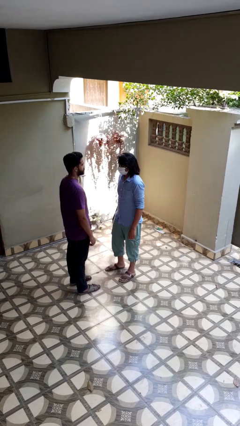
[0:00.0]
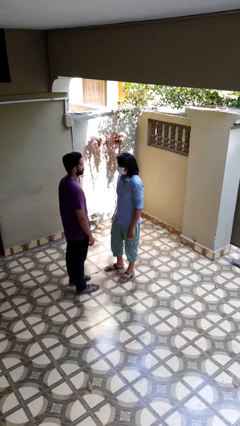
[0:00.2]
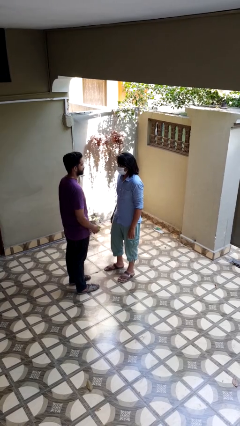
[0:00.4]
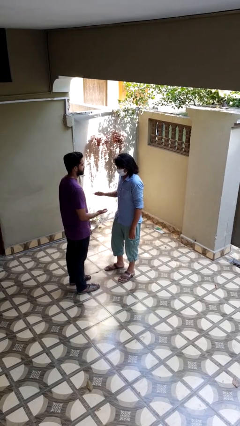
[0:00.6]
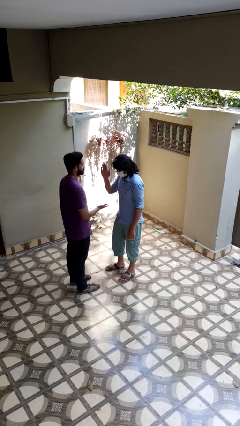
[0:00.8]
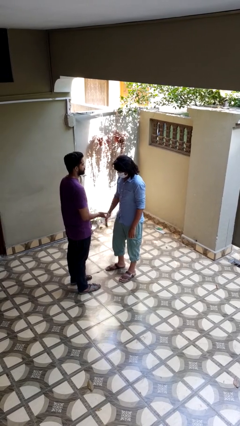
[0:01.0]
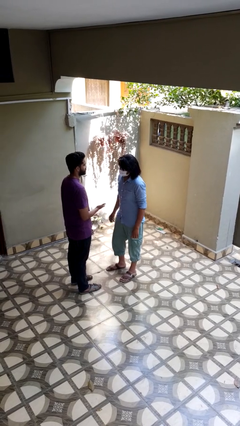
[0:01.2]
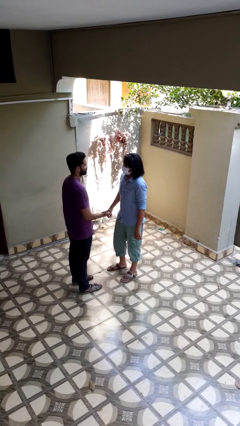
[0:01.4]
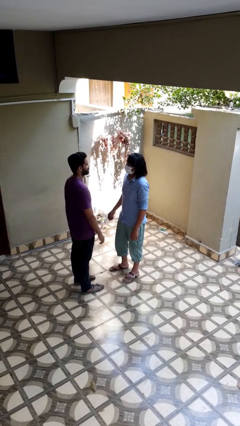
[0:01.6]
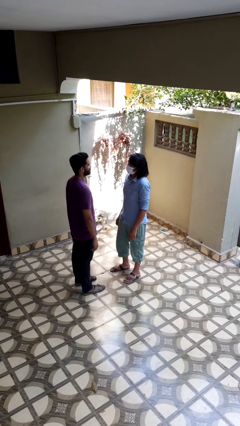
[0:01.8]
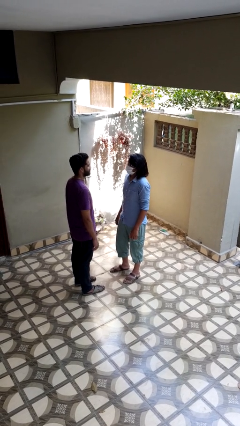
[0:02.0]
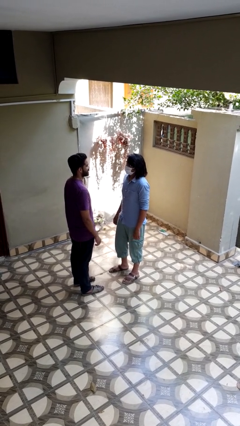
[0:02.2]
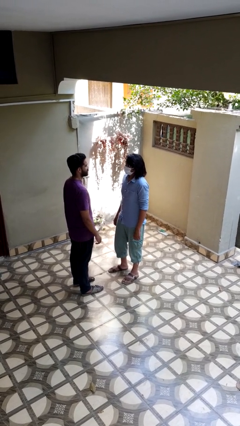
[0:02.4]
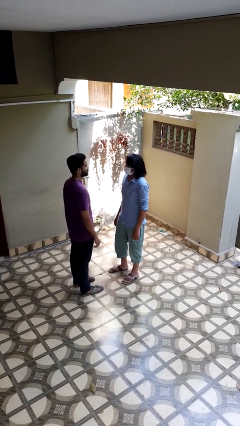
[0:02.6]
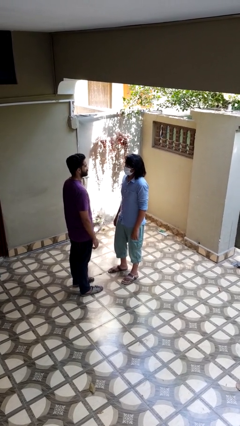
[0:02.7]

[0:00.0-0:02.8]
person highfives hand

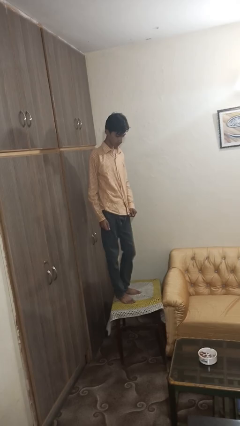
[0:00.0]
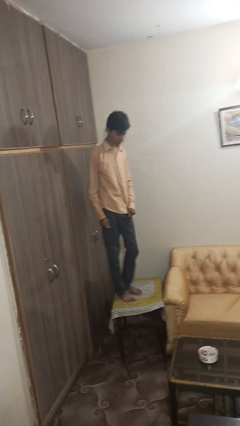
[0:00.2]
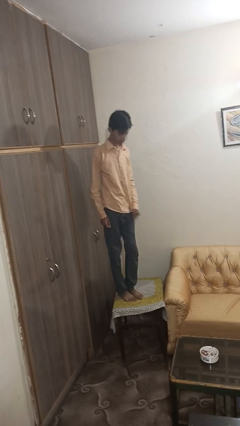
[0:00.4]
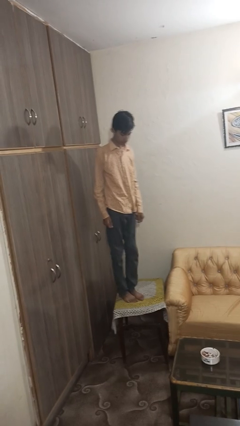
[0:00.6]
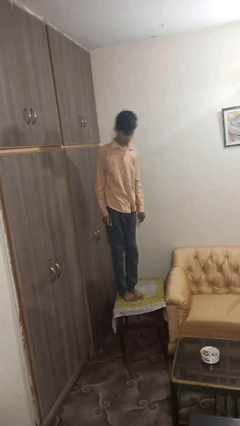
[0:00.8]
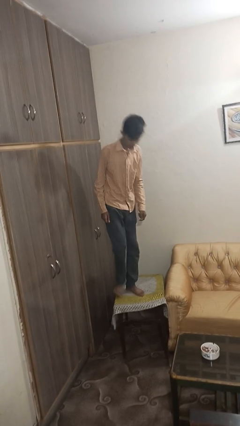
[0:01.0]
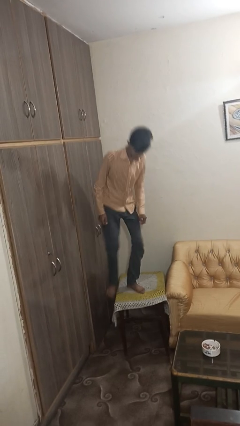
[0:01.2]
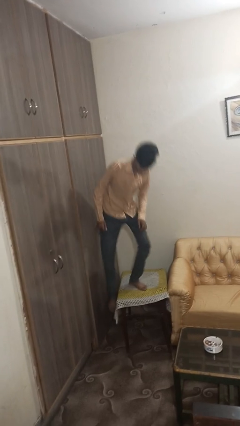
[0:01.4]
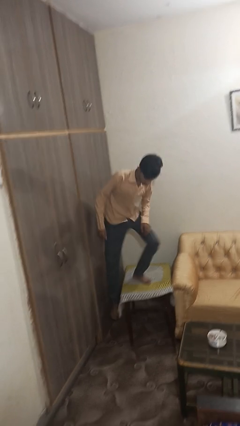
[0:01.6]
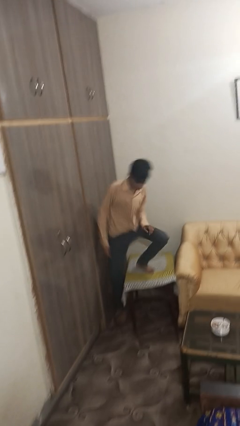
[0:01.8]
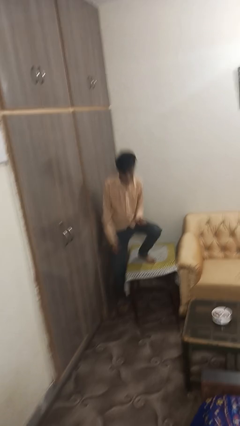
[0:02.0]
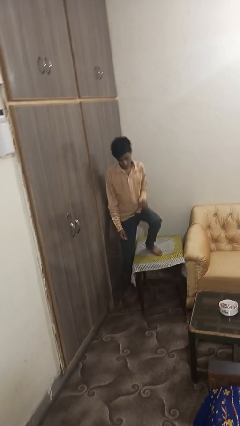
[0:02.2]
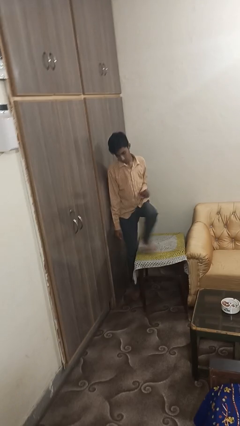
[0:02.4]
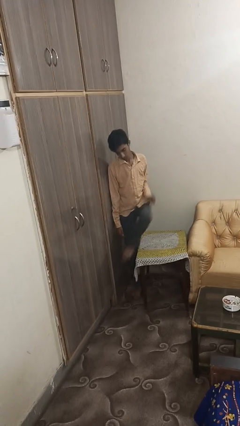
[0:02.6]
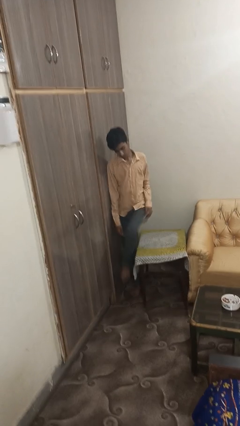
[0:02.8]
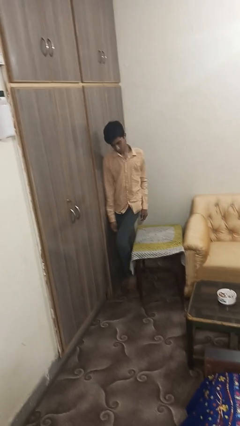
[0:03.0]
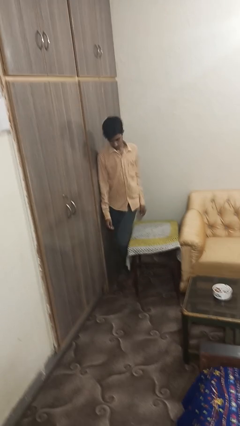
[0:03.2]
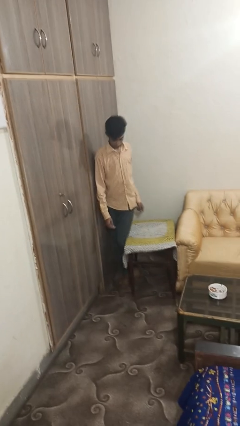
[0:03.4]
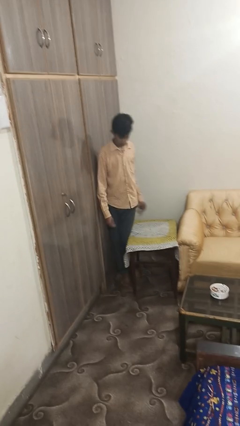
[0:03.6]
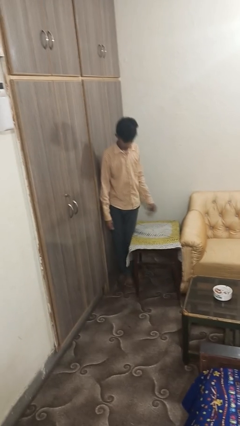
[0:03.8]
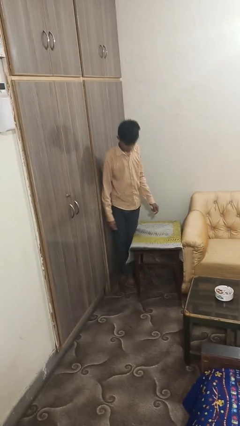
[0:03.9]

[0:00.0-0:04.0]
person climbs off table

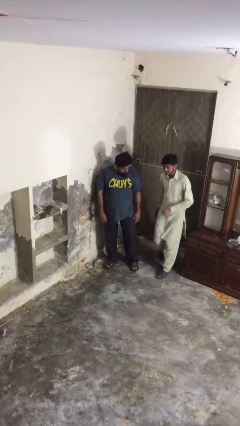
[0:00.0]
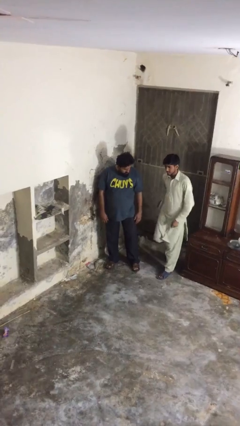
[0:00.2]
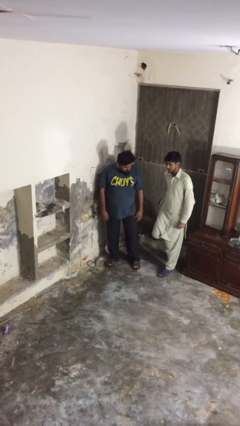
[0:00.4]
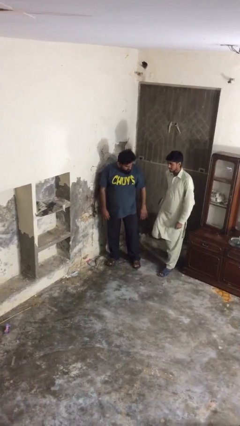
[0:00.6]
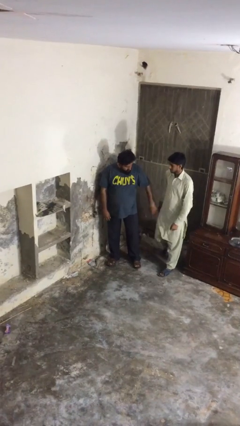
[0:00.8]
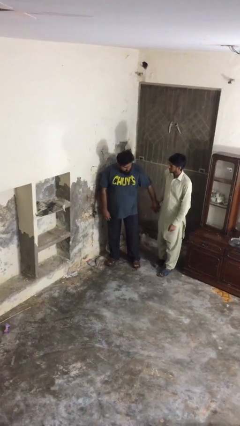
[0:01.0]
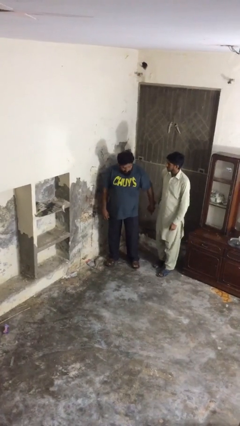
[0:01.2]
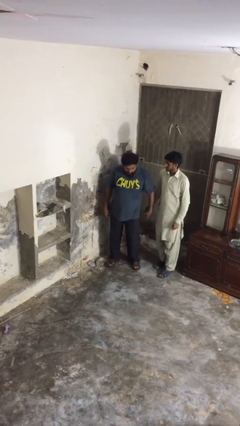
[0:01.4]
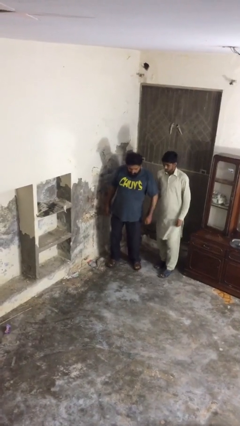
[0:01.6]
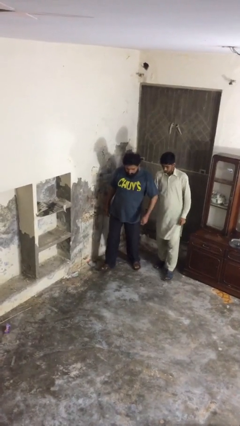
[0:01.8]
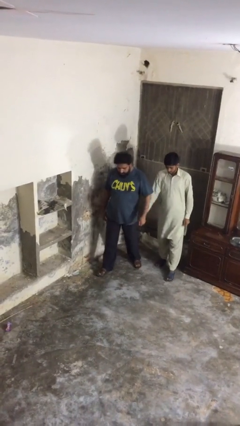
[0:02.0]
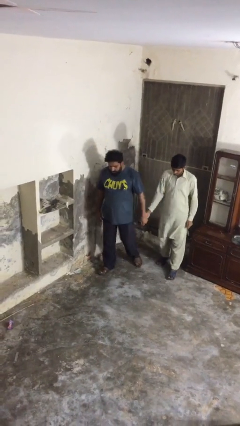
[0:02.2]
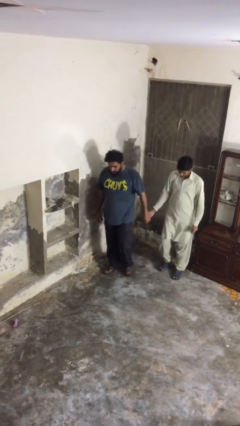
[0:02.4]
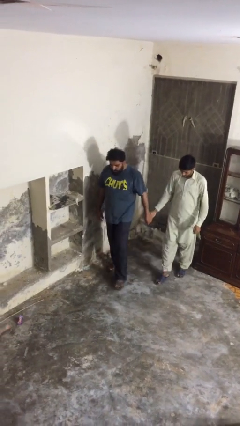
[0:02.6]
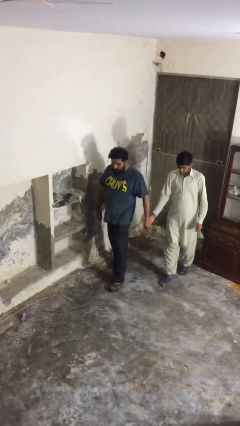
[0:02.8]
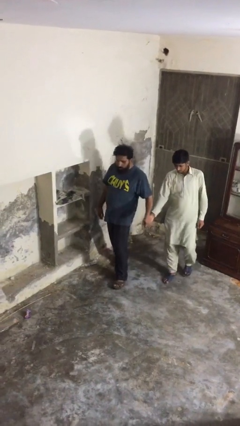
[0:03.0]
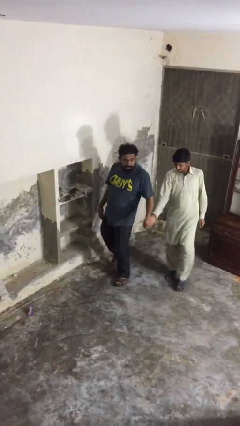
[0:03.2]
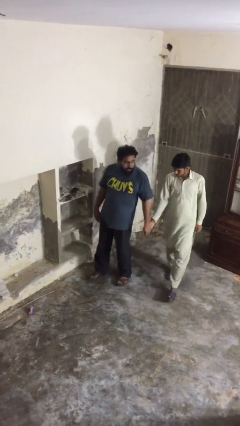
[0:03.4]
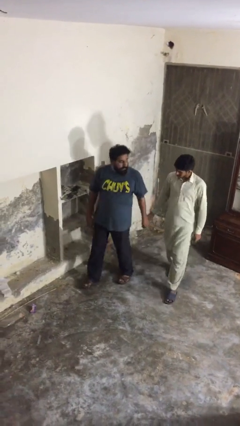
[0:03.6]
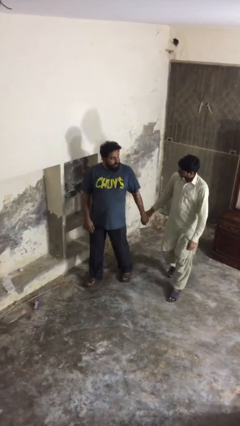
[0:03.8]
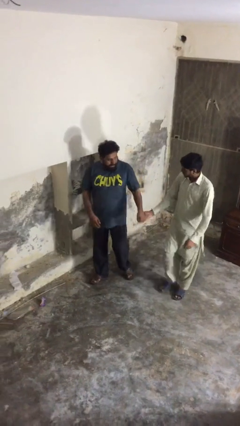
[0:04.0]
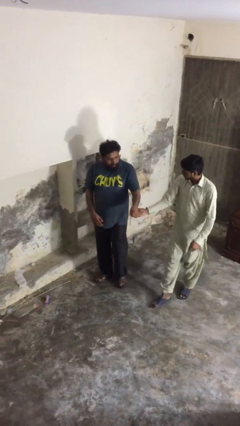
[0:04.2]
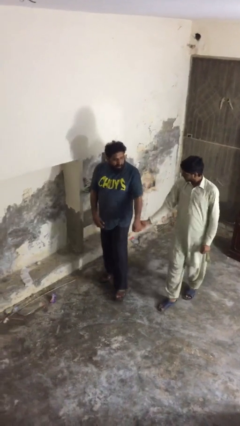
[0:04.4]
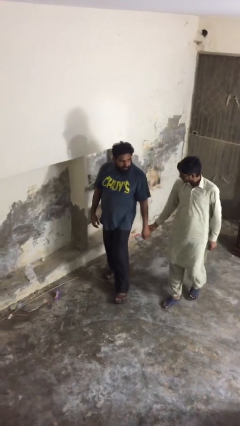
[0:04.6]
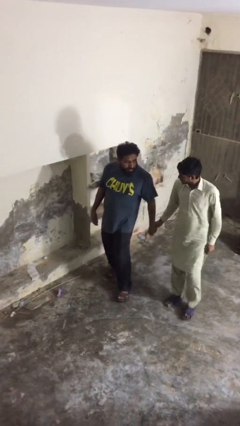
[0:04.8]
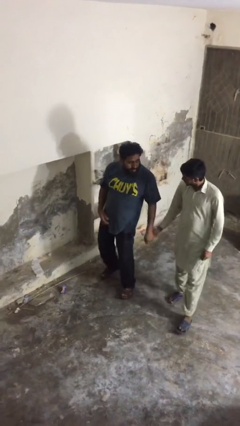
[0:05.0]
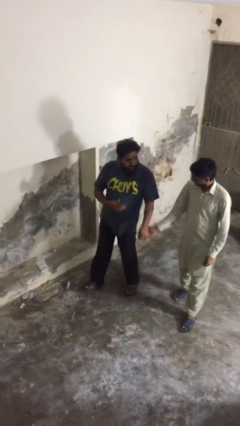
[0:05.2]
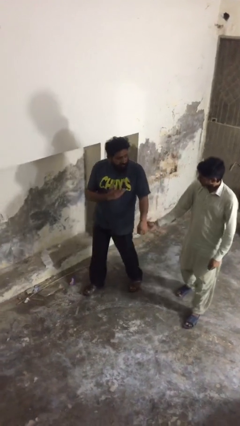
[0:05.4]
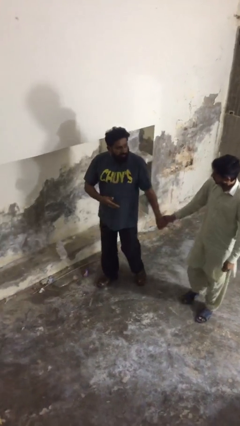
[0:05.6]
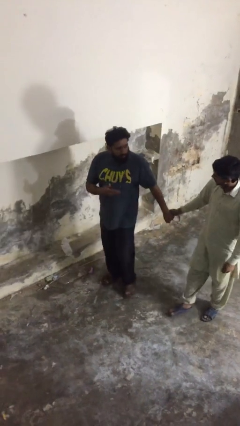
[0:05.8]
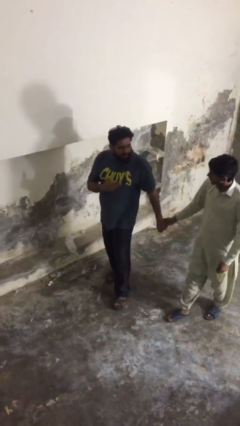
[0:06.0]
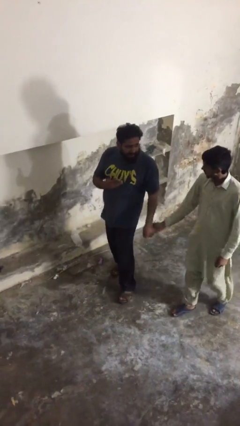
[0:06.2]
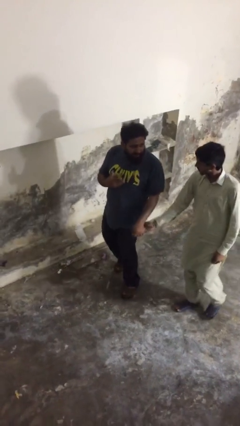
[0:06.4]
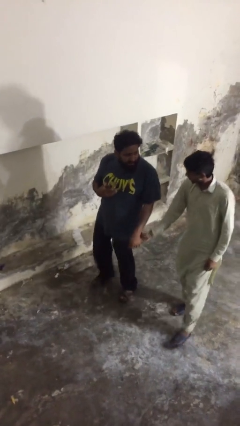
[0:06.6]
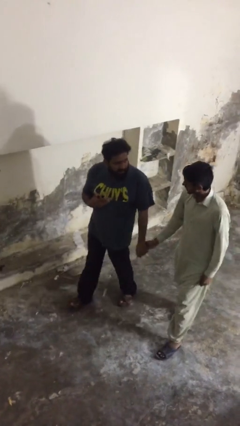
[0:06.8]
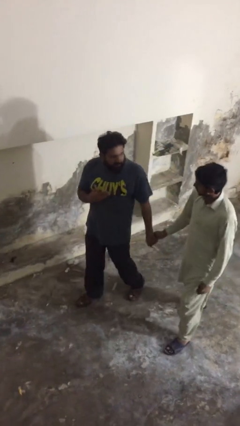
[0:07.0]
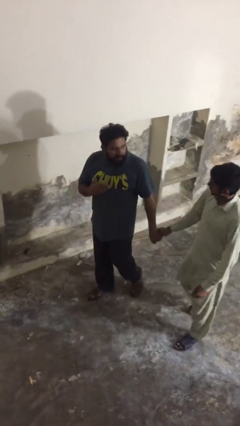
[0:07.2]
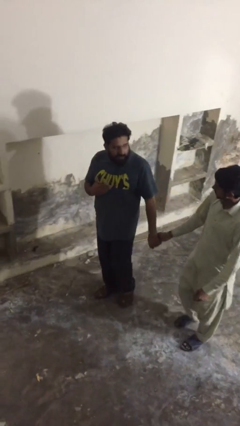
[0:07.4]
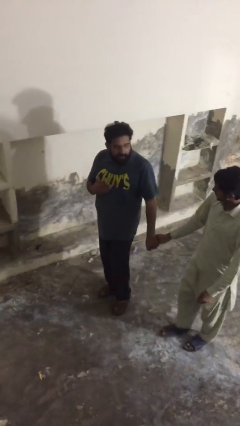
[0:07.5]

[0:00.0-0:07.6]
person holds hand

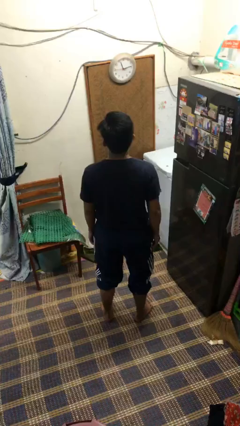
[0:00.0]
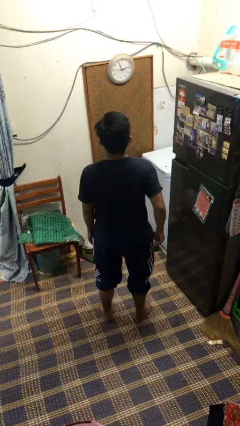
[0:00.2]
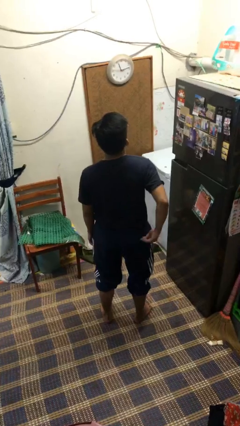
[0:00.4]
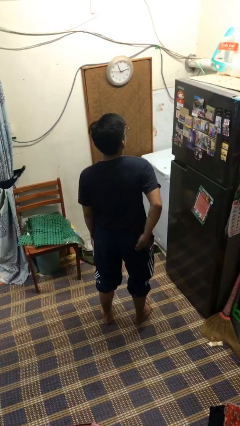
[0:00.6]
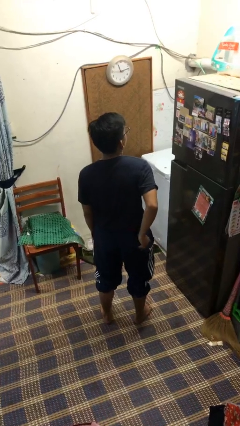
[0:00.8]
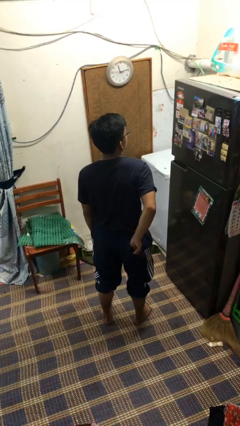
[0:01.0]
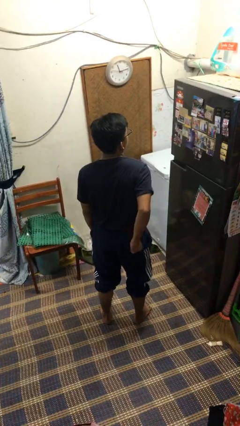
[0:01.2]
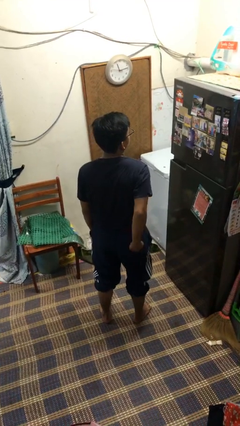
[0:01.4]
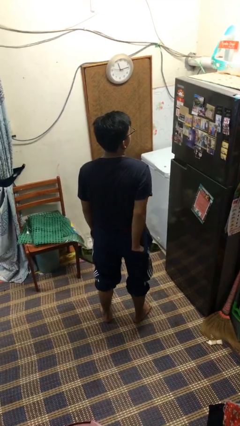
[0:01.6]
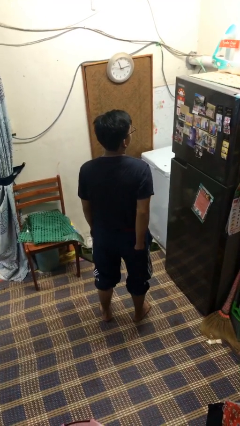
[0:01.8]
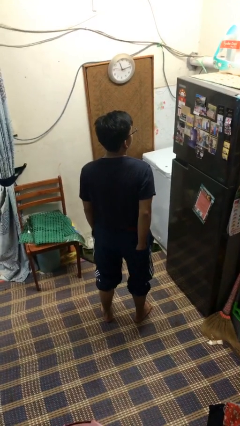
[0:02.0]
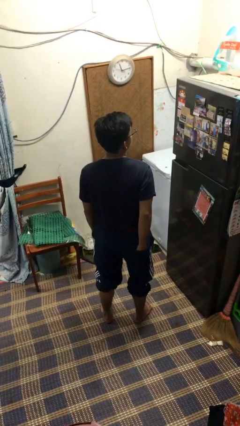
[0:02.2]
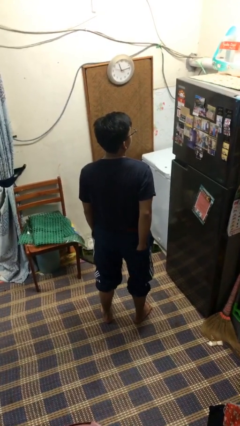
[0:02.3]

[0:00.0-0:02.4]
person puts hands in back pockets
